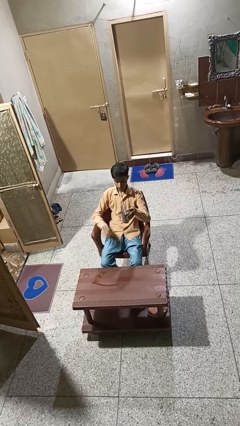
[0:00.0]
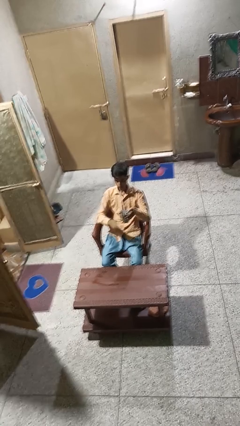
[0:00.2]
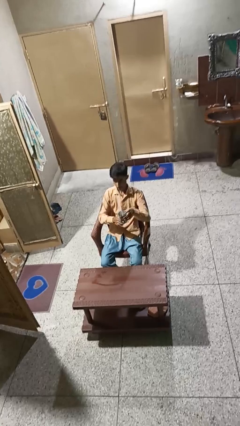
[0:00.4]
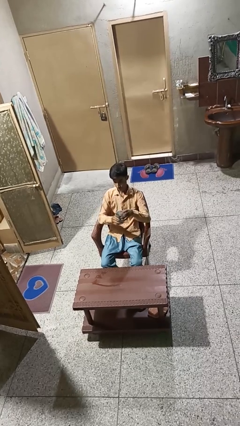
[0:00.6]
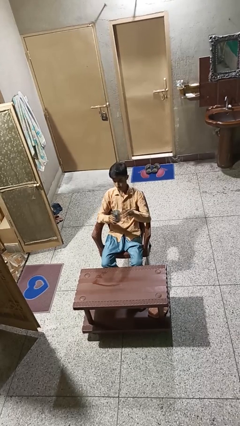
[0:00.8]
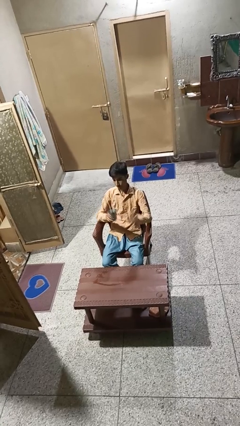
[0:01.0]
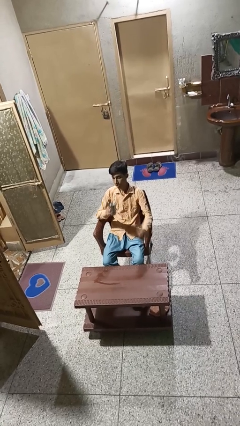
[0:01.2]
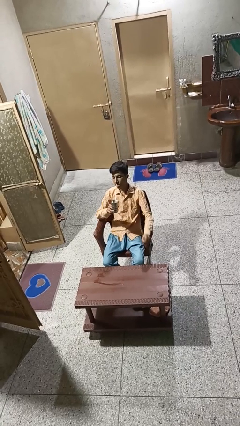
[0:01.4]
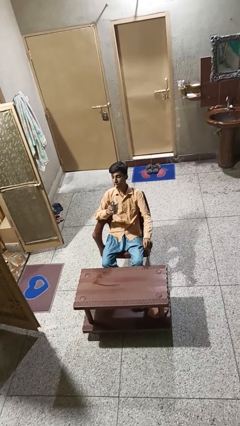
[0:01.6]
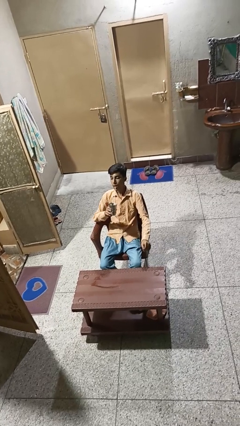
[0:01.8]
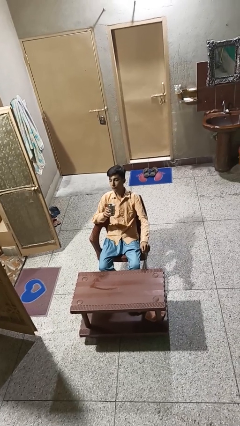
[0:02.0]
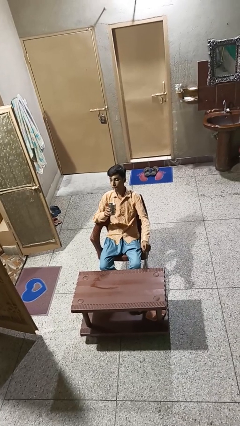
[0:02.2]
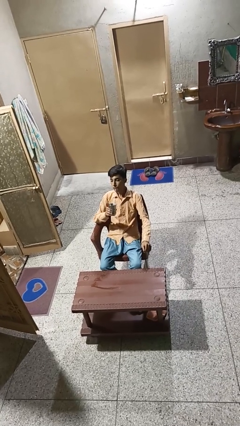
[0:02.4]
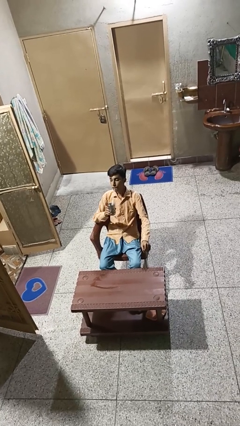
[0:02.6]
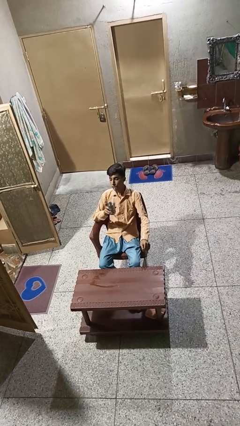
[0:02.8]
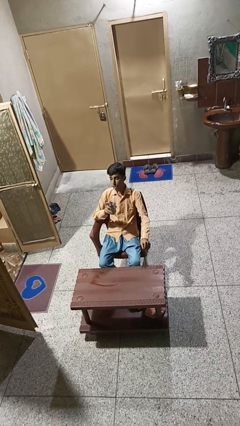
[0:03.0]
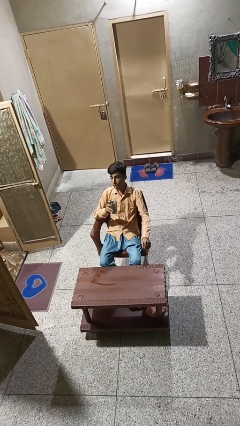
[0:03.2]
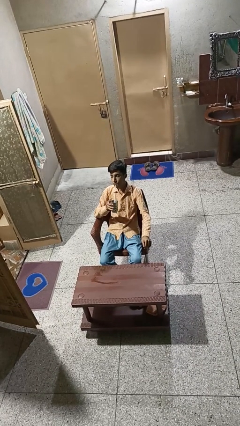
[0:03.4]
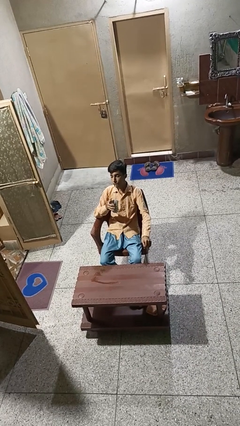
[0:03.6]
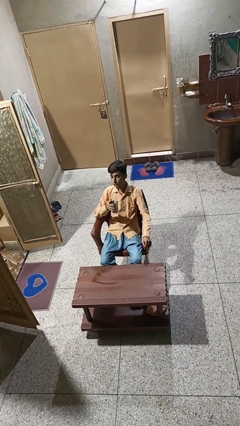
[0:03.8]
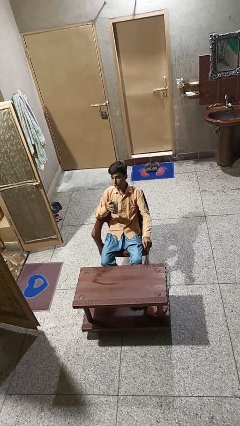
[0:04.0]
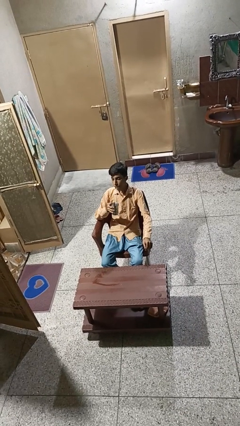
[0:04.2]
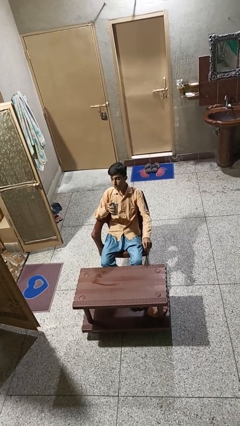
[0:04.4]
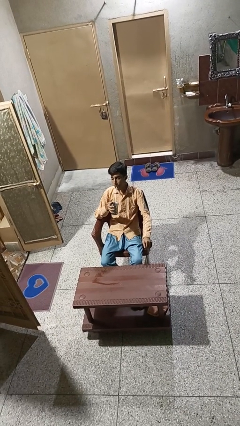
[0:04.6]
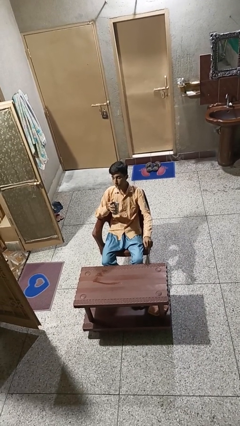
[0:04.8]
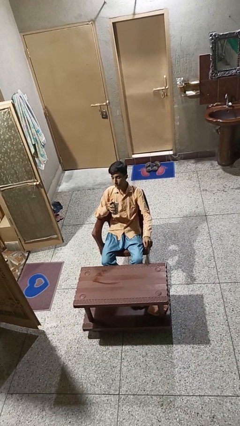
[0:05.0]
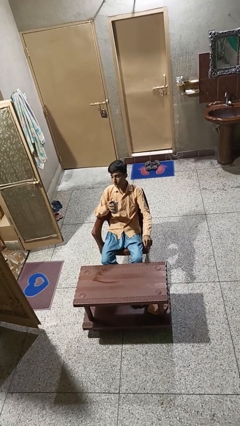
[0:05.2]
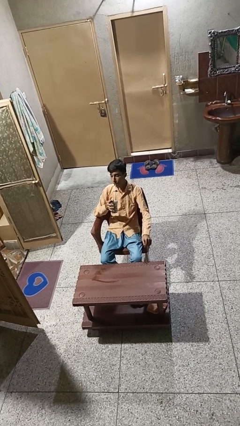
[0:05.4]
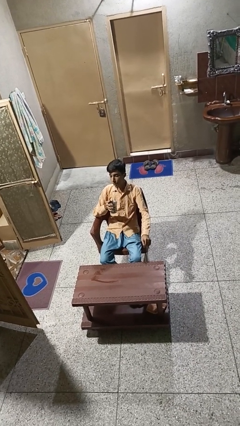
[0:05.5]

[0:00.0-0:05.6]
person drinks from straw

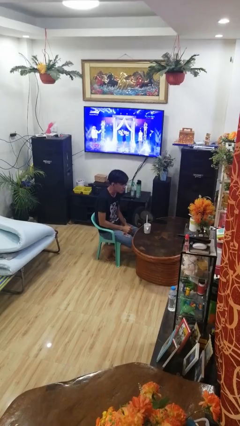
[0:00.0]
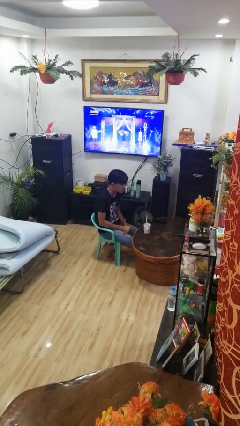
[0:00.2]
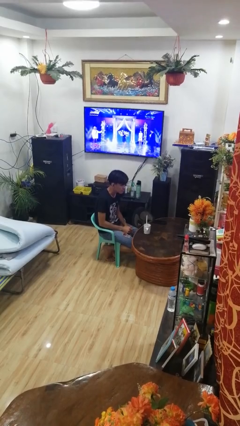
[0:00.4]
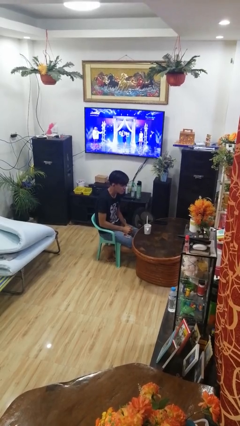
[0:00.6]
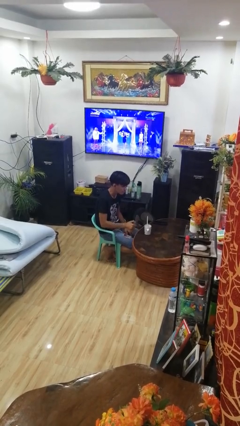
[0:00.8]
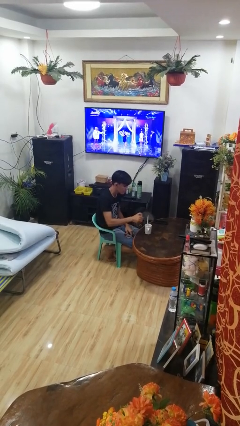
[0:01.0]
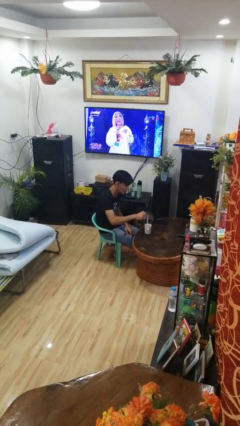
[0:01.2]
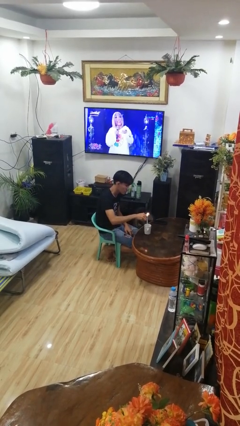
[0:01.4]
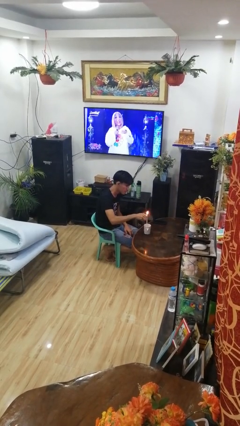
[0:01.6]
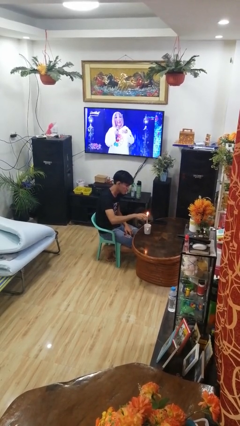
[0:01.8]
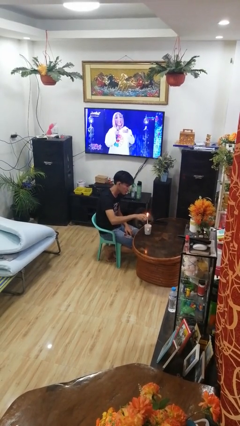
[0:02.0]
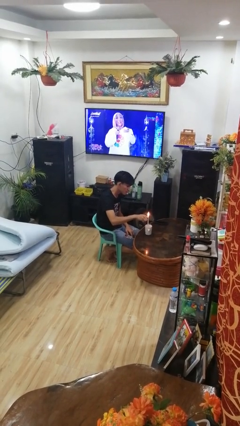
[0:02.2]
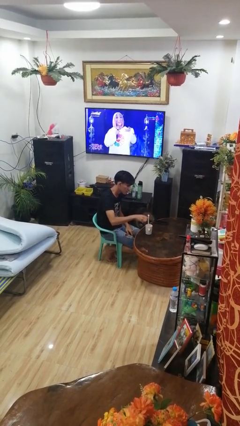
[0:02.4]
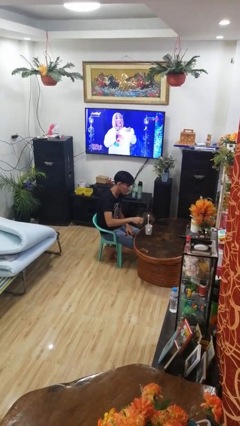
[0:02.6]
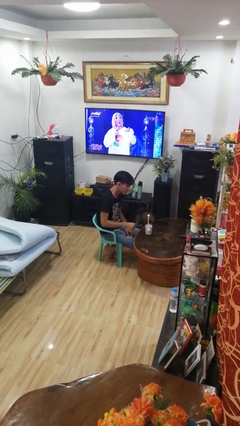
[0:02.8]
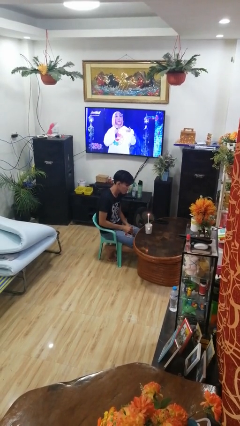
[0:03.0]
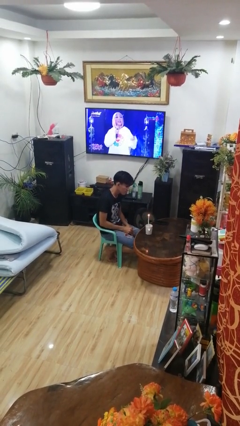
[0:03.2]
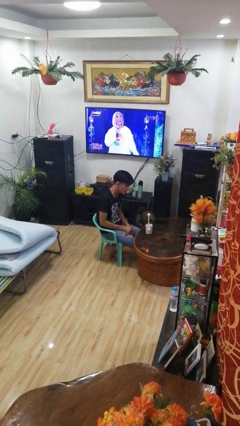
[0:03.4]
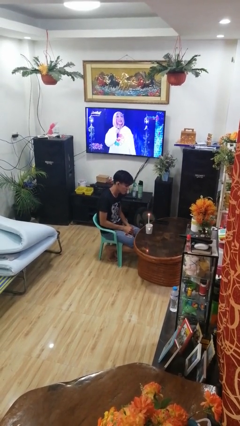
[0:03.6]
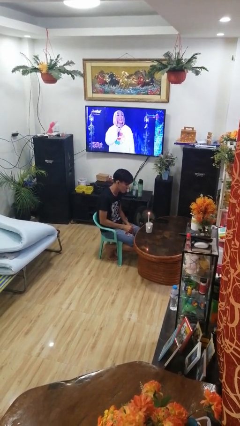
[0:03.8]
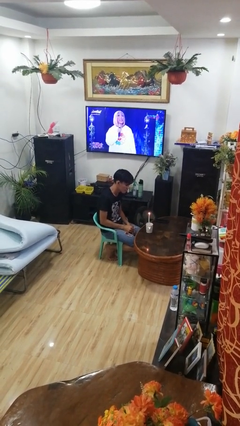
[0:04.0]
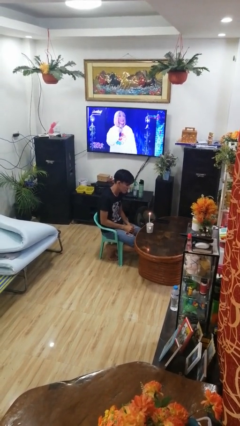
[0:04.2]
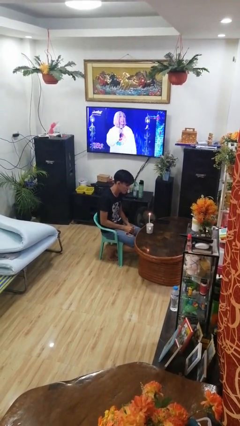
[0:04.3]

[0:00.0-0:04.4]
person lights candle

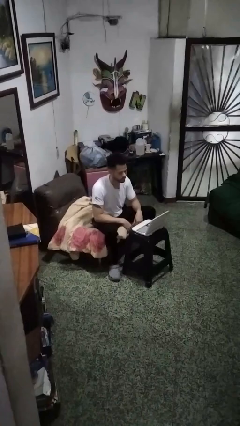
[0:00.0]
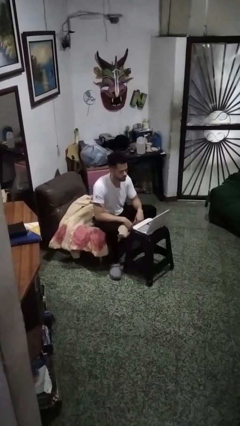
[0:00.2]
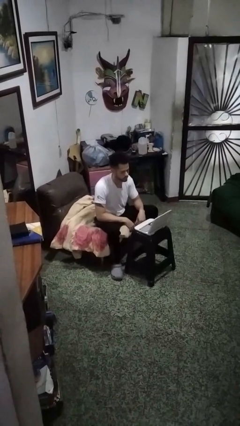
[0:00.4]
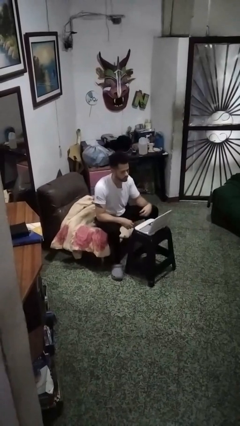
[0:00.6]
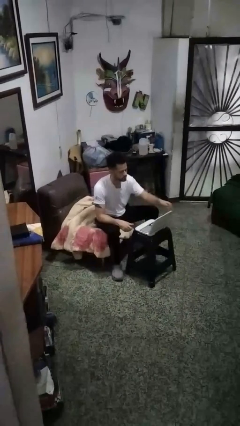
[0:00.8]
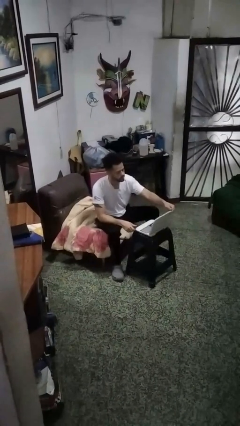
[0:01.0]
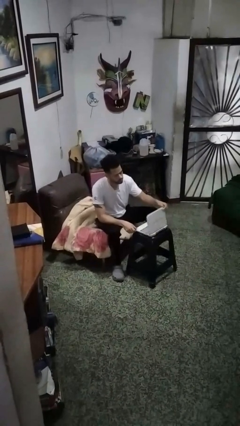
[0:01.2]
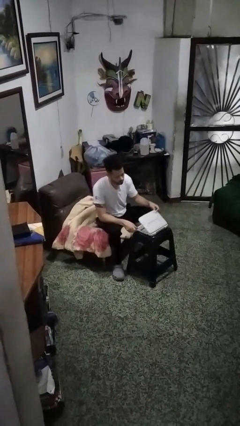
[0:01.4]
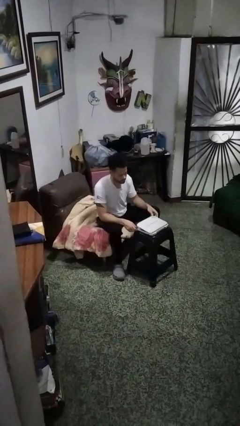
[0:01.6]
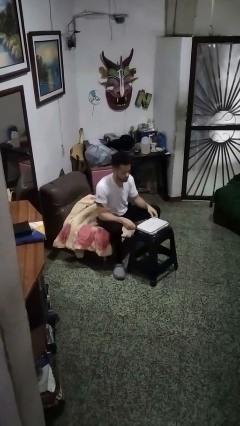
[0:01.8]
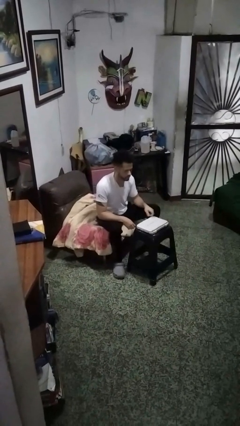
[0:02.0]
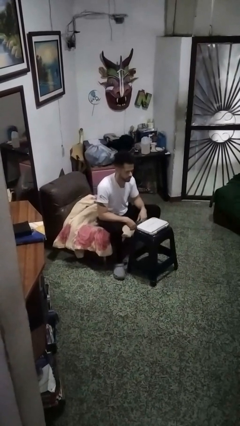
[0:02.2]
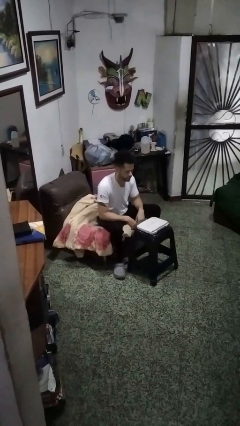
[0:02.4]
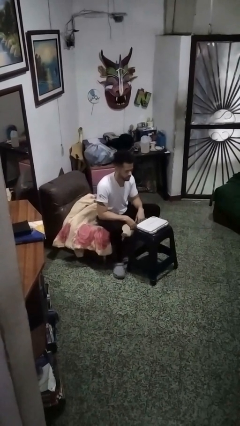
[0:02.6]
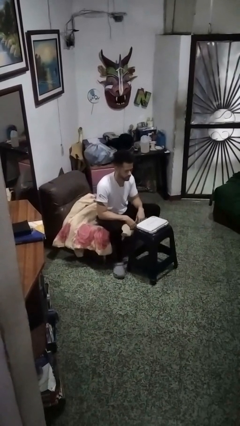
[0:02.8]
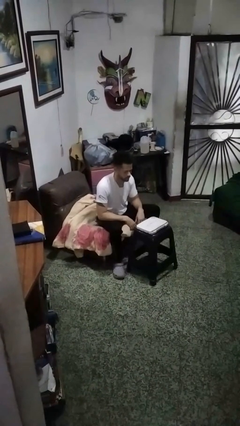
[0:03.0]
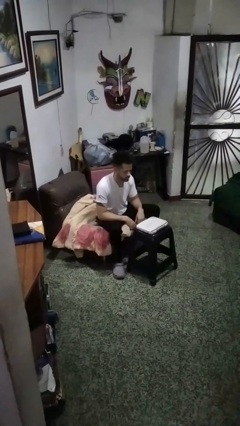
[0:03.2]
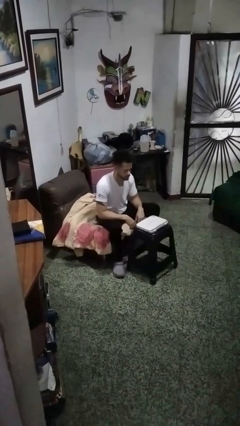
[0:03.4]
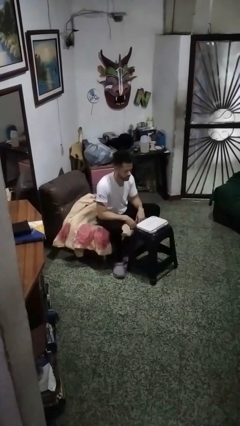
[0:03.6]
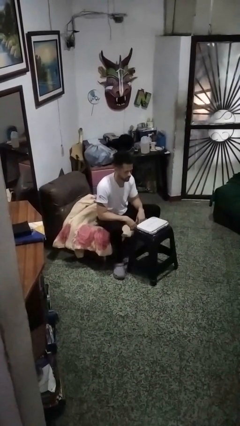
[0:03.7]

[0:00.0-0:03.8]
person closes laptop

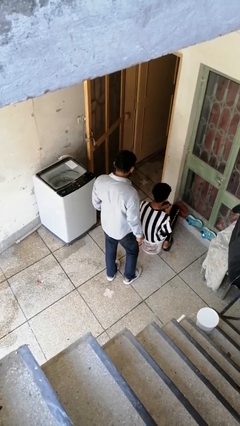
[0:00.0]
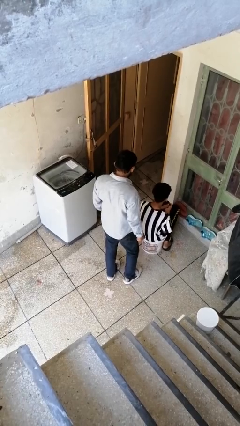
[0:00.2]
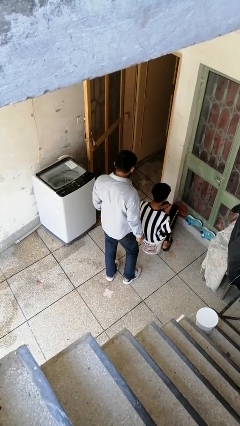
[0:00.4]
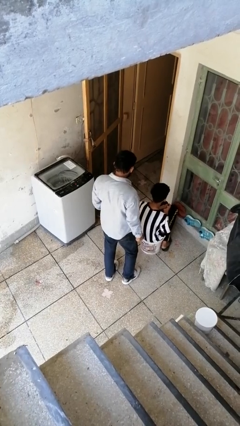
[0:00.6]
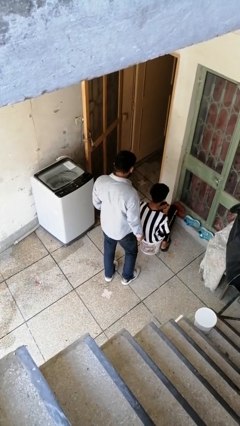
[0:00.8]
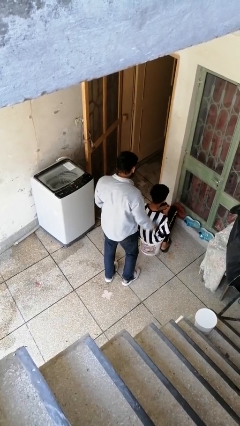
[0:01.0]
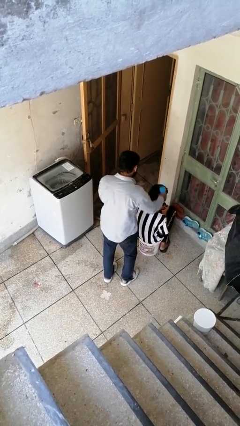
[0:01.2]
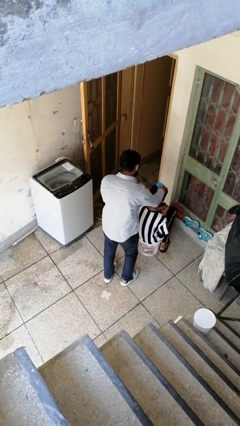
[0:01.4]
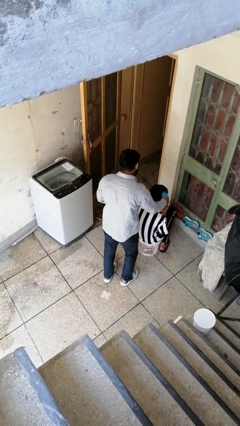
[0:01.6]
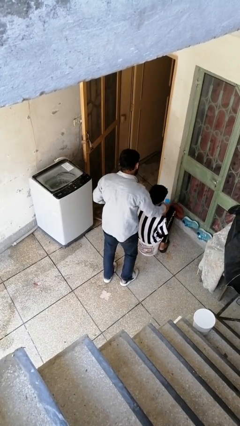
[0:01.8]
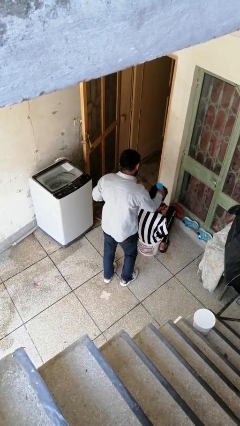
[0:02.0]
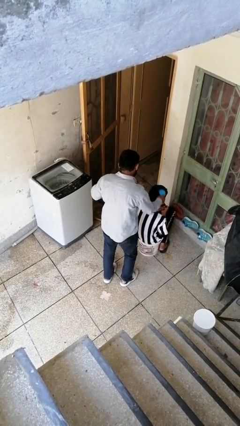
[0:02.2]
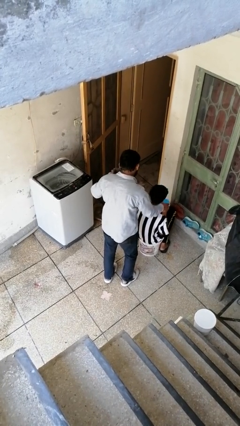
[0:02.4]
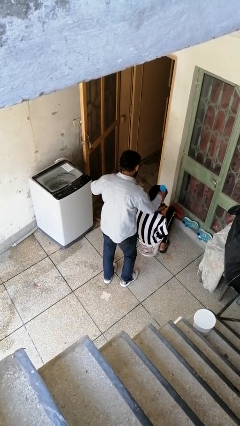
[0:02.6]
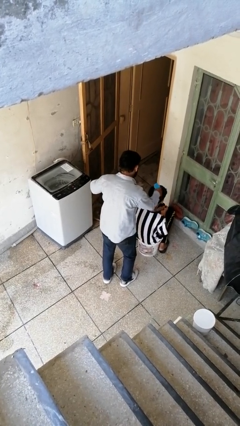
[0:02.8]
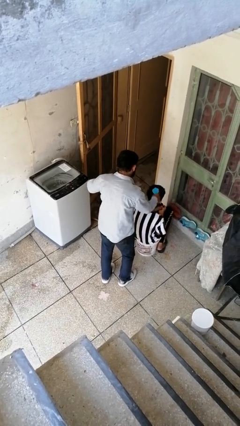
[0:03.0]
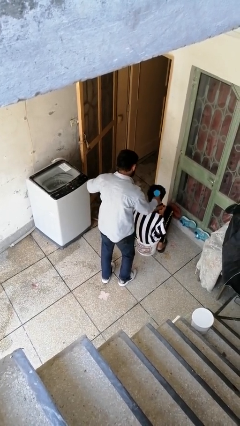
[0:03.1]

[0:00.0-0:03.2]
person brushes hair of person

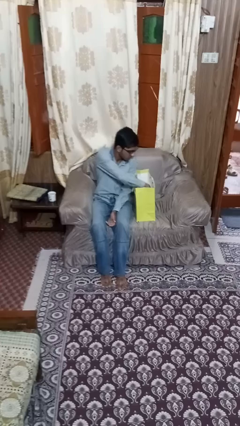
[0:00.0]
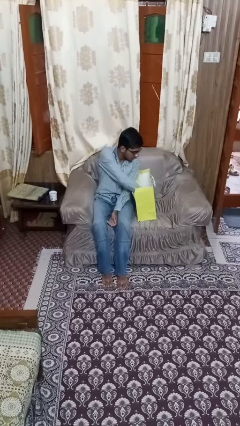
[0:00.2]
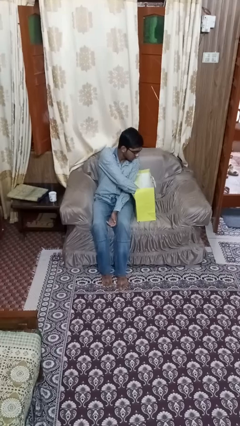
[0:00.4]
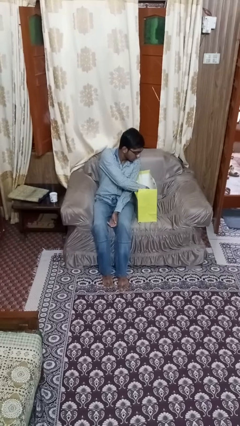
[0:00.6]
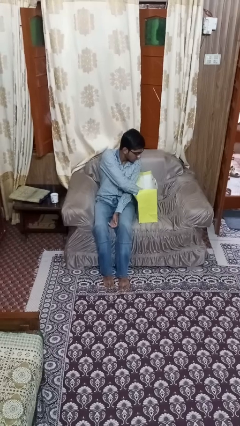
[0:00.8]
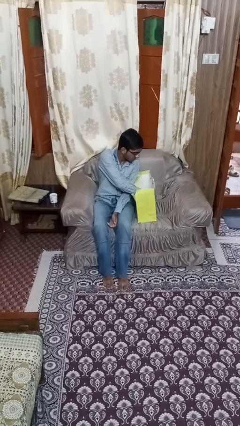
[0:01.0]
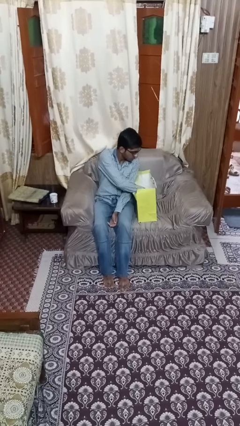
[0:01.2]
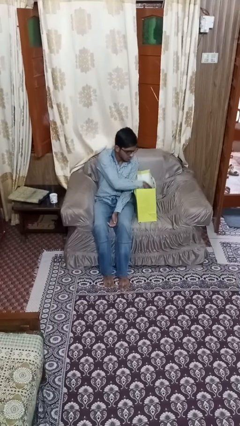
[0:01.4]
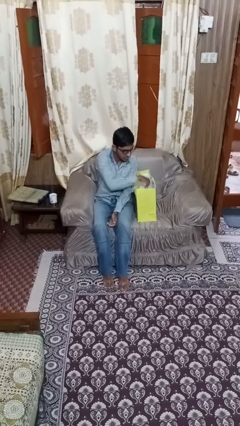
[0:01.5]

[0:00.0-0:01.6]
person searches in bag
